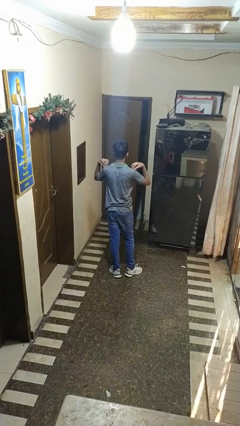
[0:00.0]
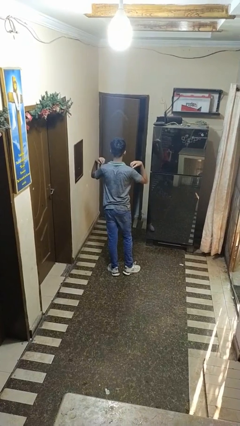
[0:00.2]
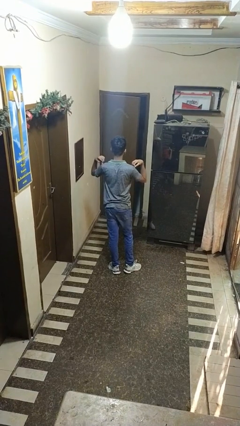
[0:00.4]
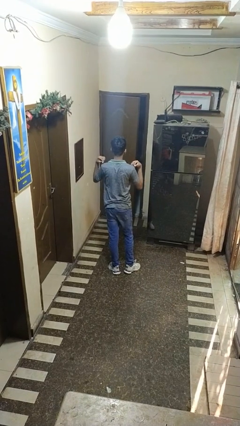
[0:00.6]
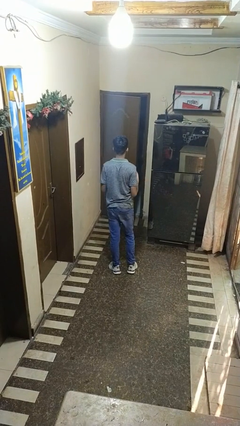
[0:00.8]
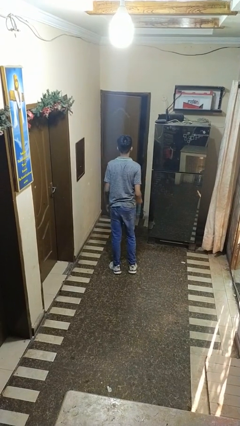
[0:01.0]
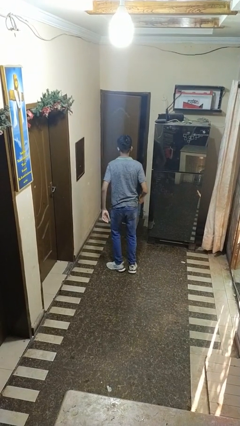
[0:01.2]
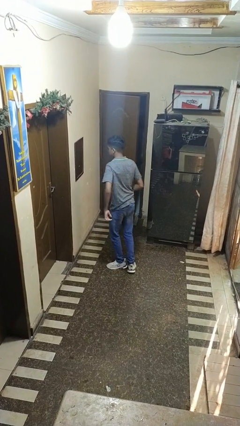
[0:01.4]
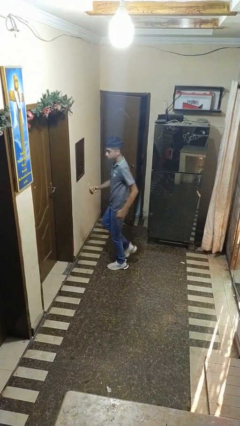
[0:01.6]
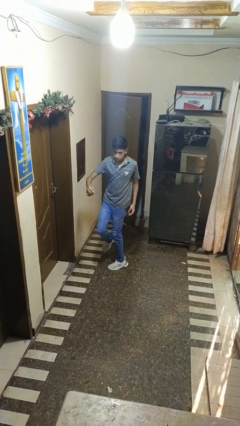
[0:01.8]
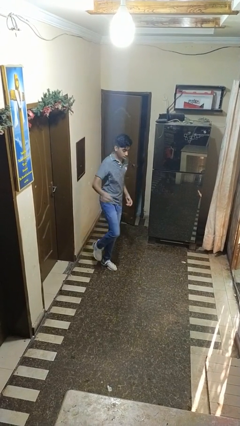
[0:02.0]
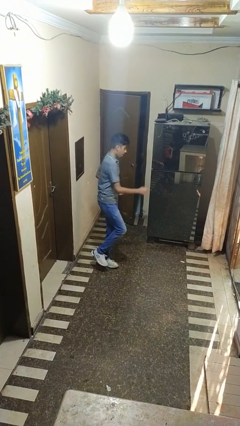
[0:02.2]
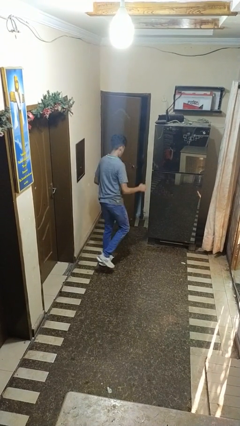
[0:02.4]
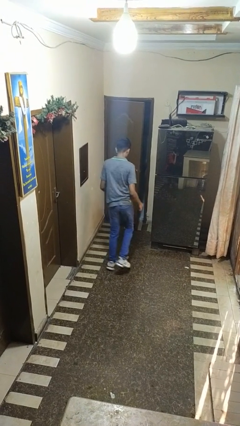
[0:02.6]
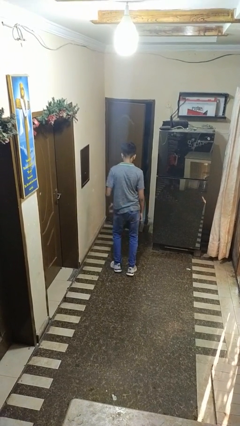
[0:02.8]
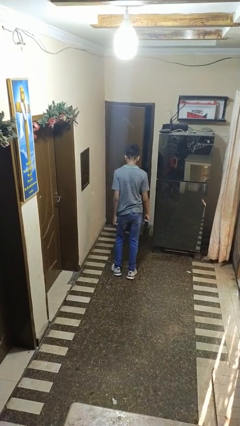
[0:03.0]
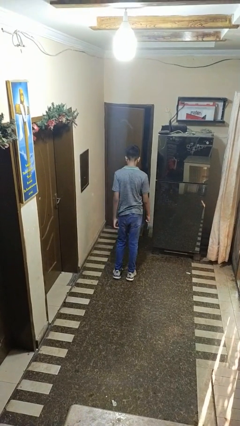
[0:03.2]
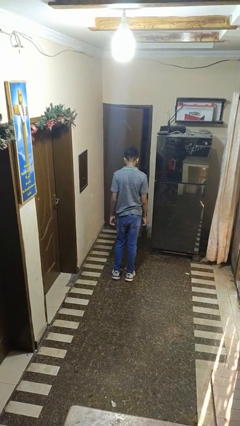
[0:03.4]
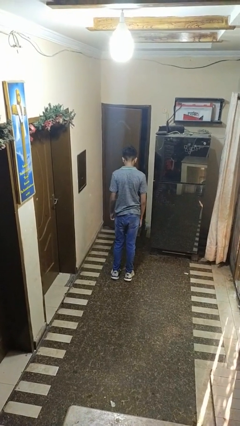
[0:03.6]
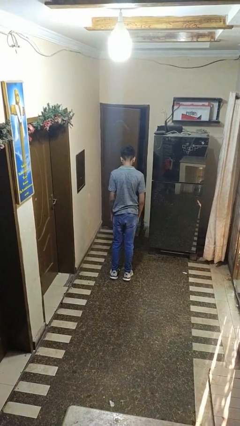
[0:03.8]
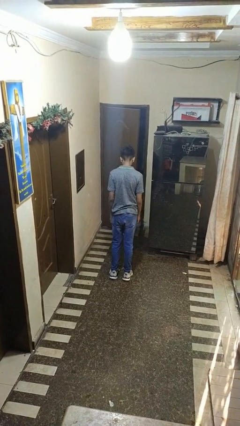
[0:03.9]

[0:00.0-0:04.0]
person twirls

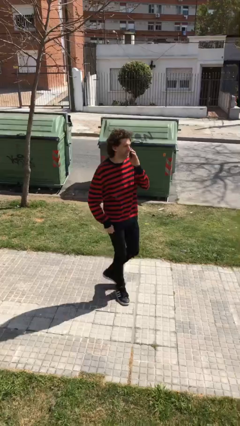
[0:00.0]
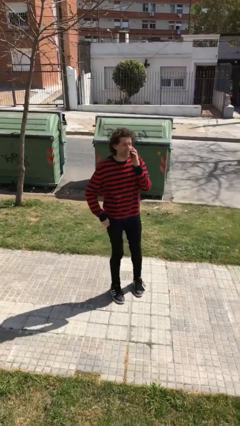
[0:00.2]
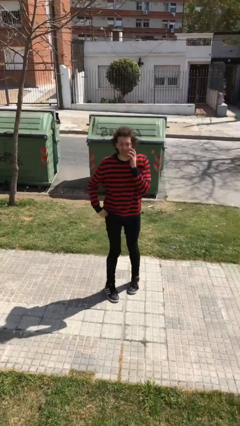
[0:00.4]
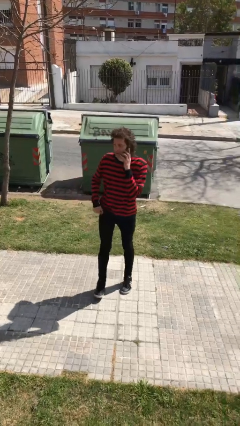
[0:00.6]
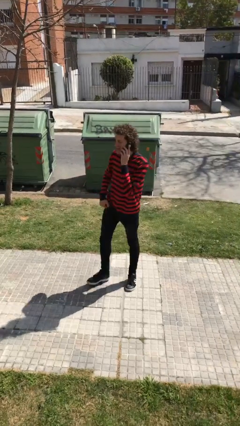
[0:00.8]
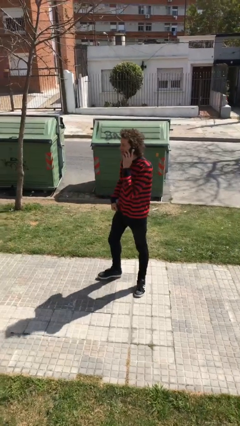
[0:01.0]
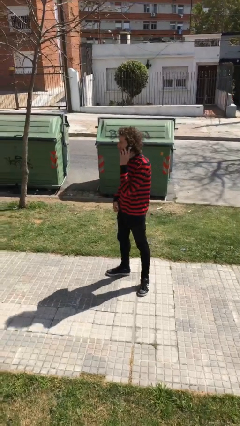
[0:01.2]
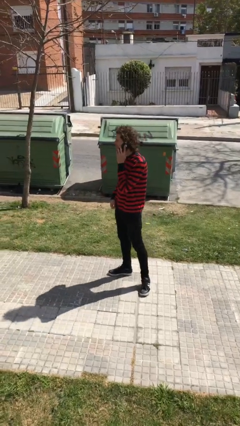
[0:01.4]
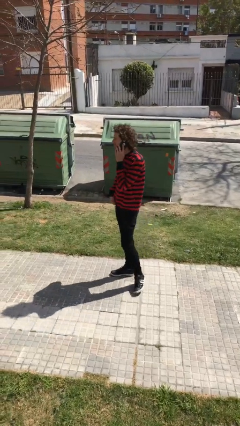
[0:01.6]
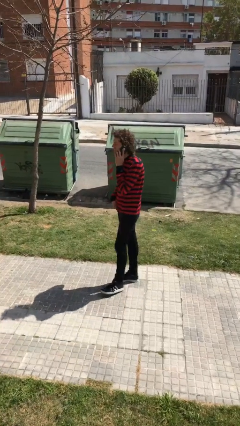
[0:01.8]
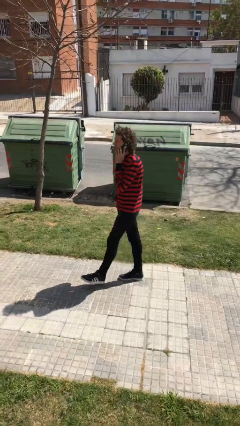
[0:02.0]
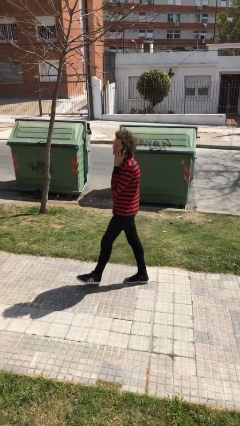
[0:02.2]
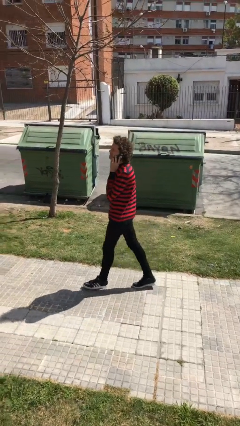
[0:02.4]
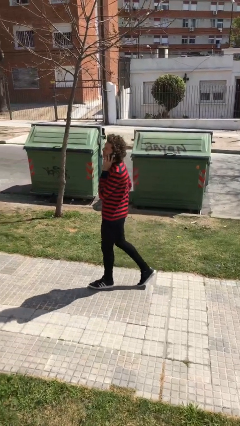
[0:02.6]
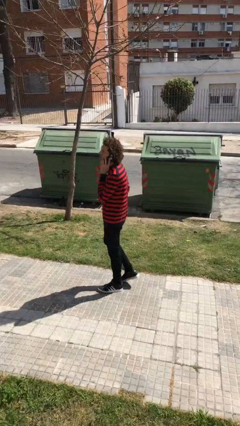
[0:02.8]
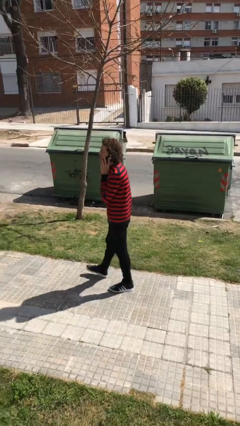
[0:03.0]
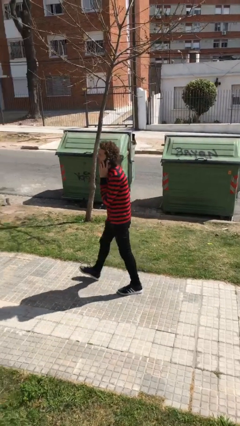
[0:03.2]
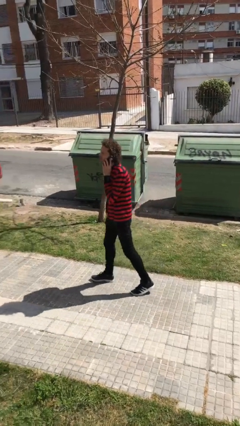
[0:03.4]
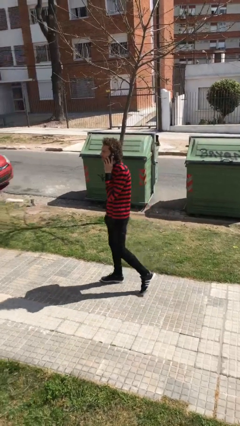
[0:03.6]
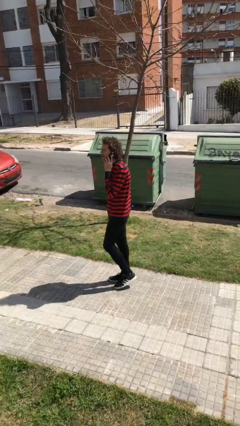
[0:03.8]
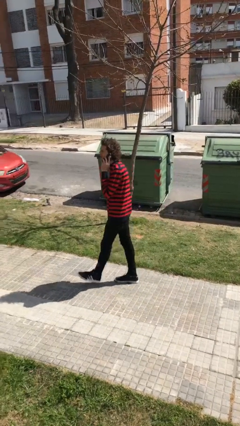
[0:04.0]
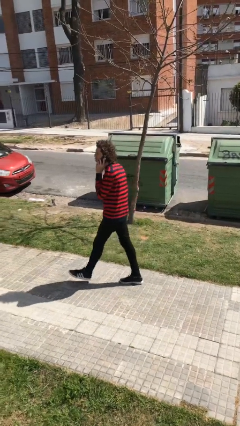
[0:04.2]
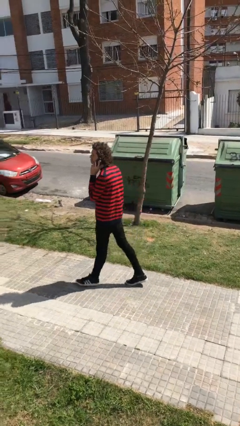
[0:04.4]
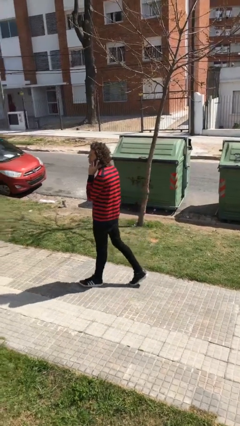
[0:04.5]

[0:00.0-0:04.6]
person talks on phone

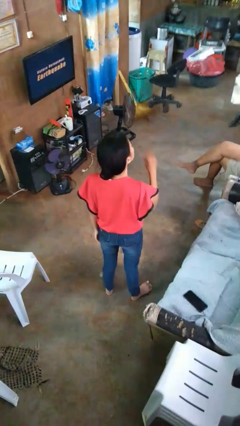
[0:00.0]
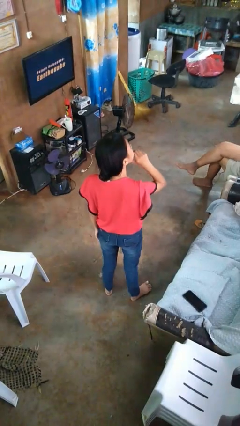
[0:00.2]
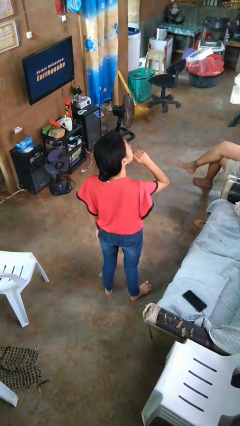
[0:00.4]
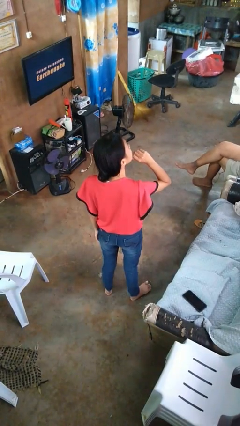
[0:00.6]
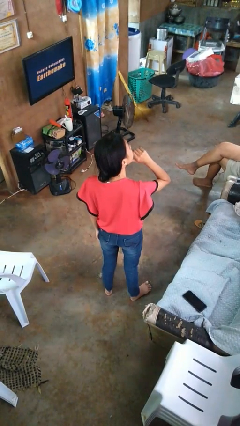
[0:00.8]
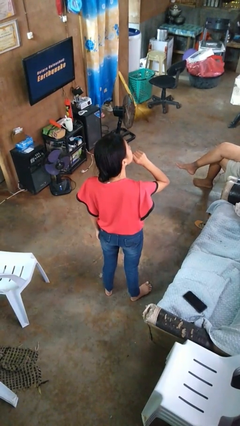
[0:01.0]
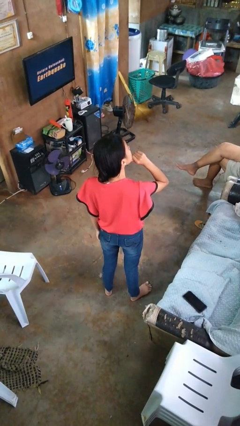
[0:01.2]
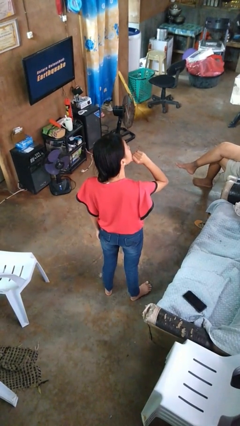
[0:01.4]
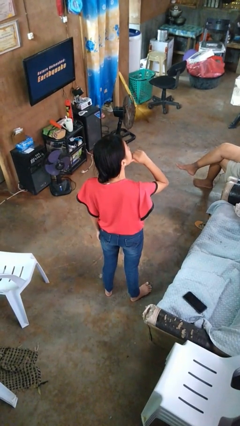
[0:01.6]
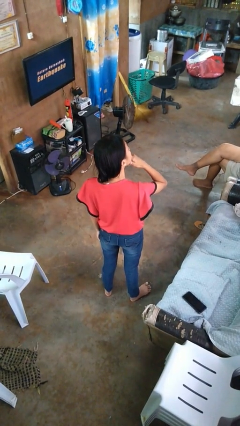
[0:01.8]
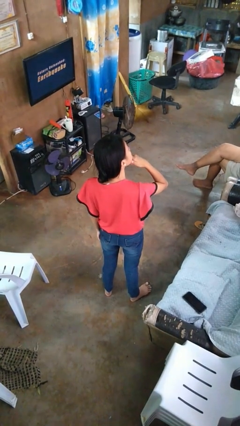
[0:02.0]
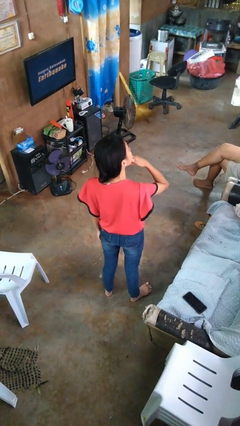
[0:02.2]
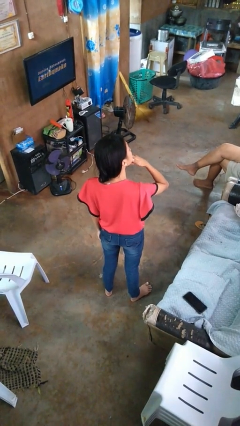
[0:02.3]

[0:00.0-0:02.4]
person strokes chin

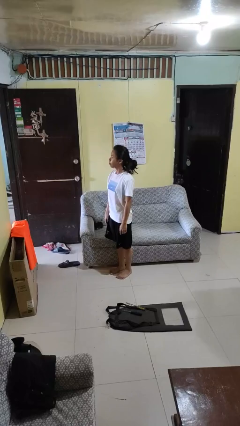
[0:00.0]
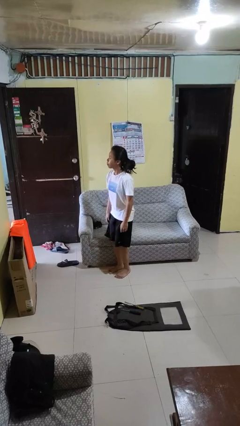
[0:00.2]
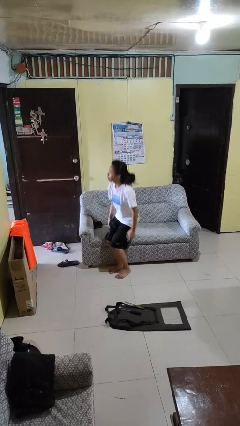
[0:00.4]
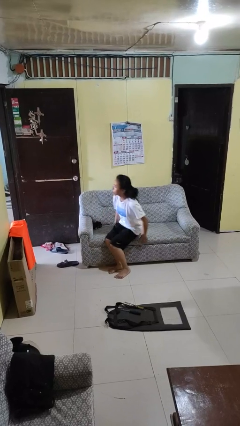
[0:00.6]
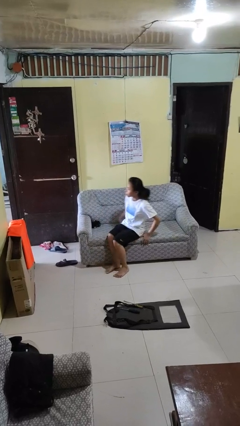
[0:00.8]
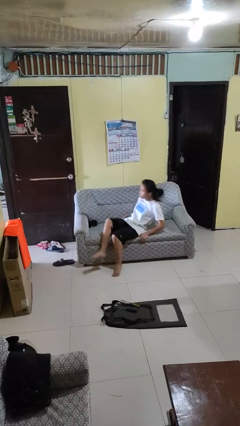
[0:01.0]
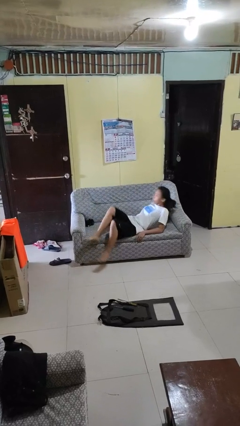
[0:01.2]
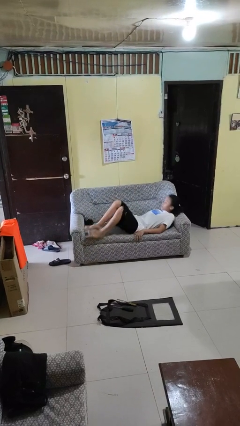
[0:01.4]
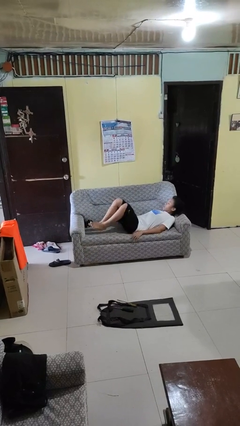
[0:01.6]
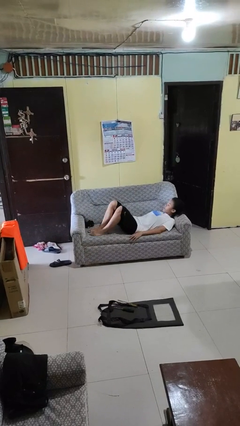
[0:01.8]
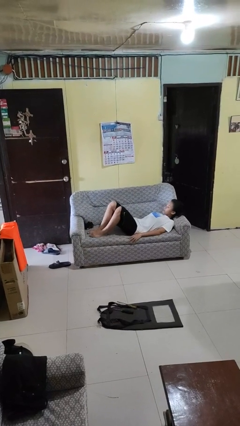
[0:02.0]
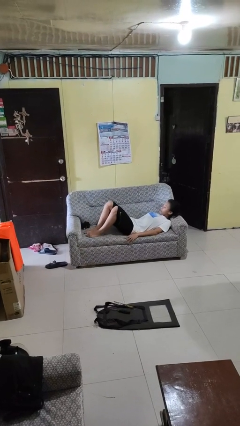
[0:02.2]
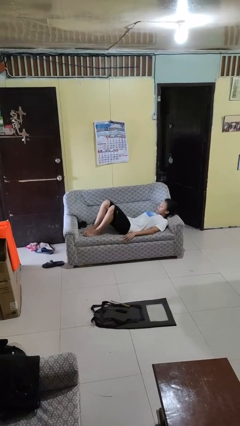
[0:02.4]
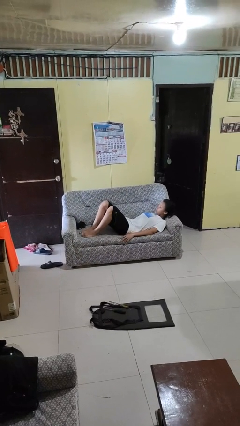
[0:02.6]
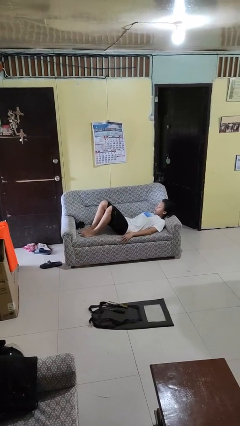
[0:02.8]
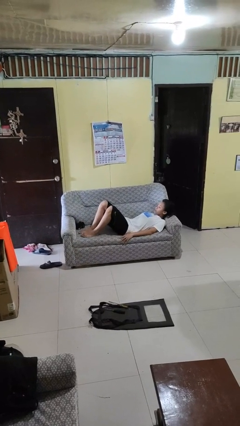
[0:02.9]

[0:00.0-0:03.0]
person lies down on couch

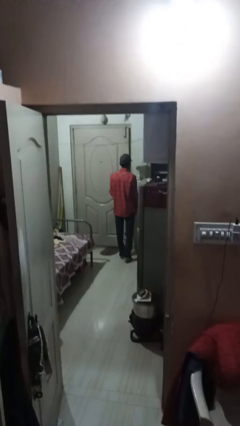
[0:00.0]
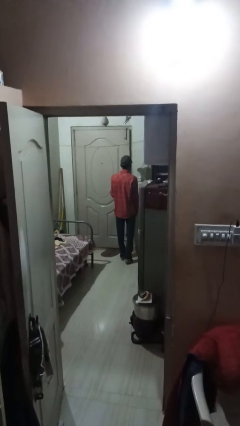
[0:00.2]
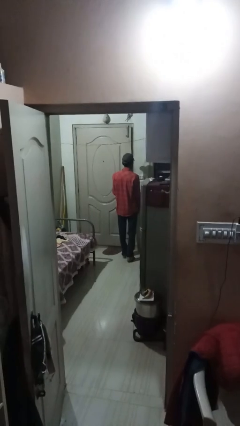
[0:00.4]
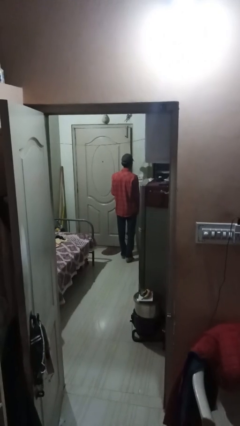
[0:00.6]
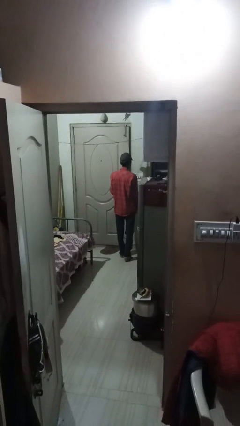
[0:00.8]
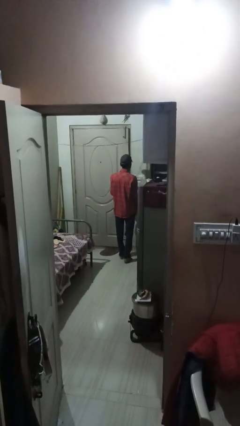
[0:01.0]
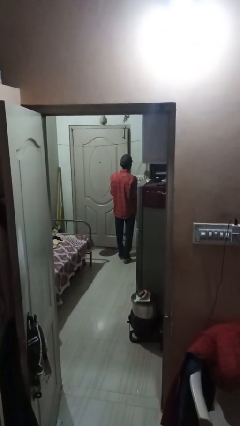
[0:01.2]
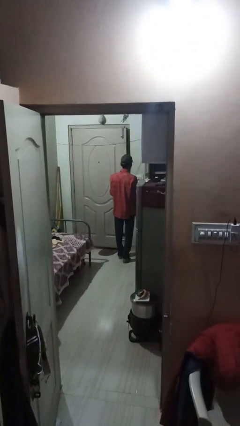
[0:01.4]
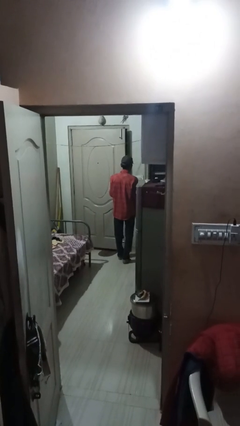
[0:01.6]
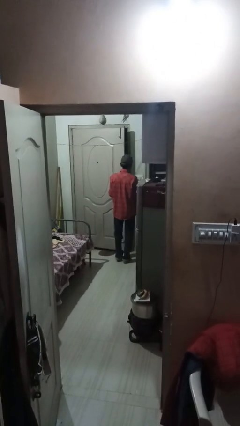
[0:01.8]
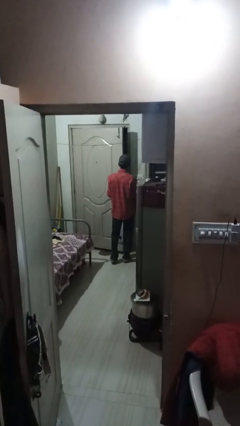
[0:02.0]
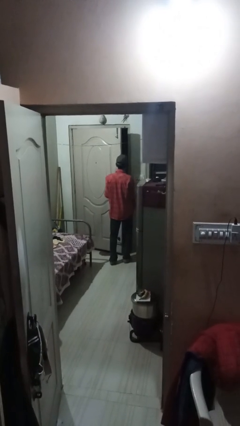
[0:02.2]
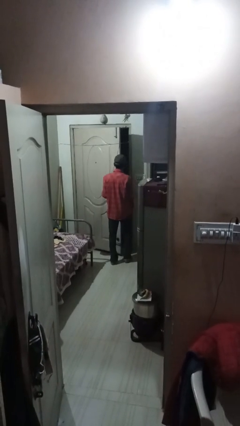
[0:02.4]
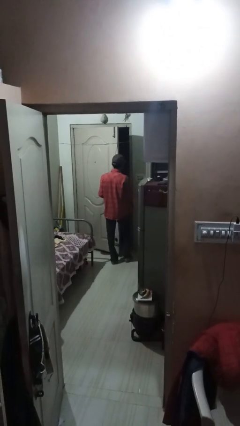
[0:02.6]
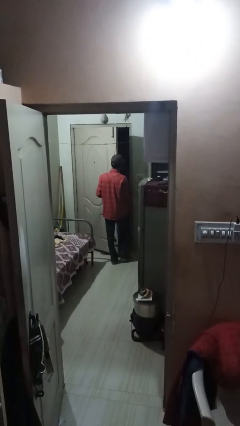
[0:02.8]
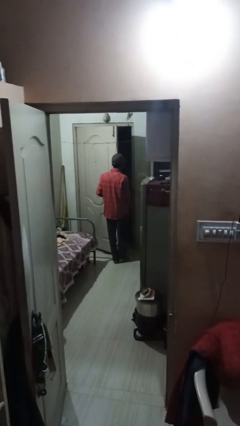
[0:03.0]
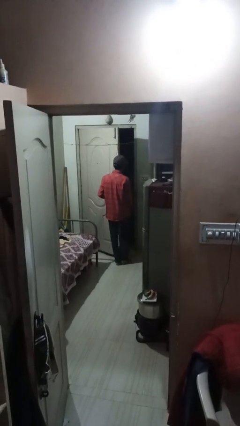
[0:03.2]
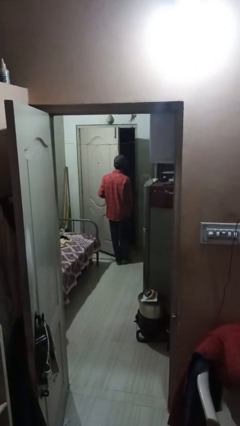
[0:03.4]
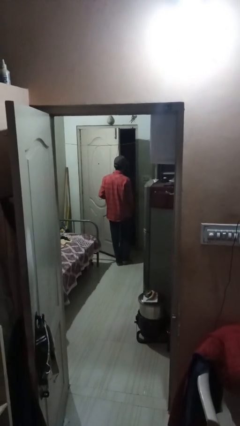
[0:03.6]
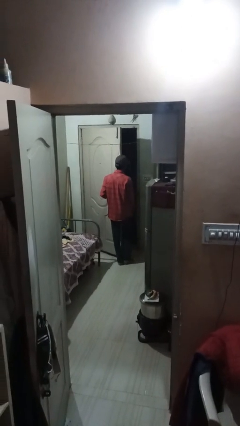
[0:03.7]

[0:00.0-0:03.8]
person opens facility door
